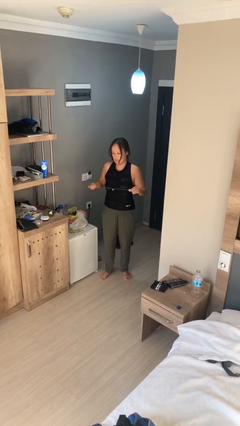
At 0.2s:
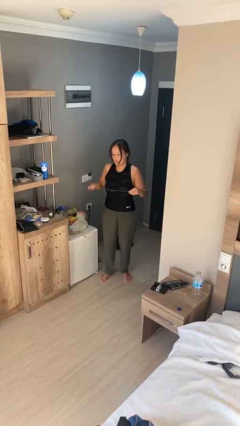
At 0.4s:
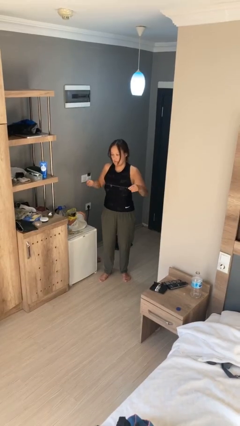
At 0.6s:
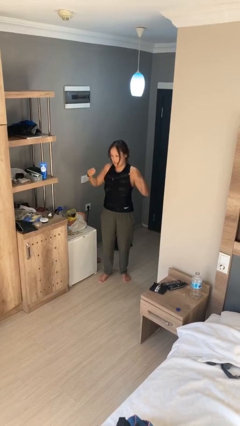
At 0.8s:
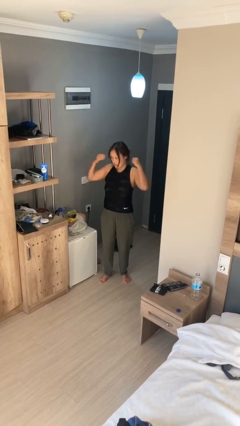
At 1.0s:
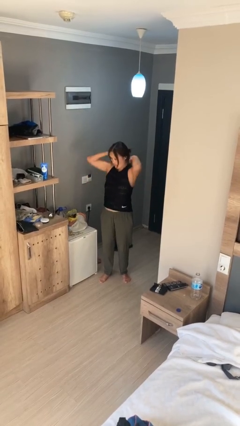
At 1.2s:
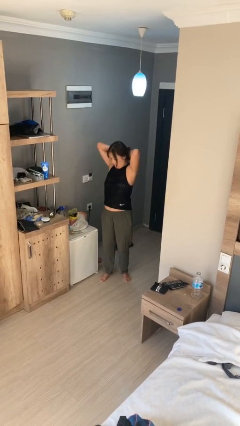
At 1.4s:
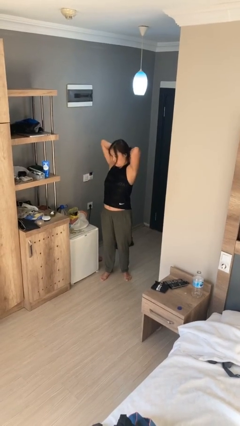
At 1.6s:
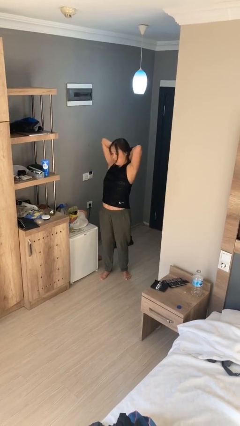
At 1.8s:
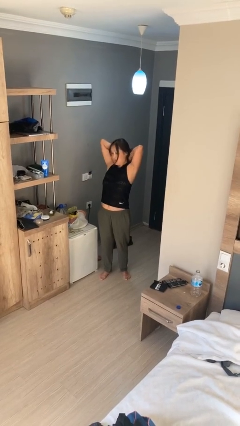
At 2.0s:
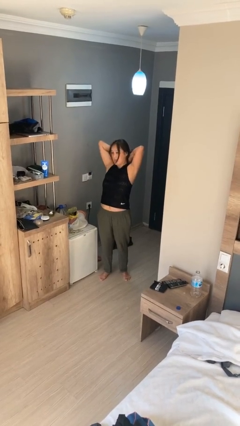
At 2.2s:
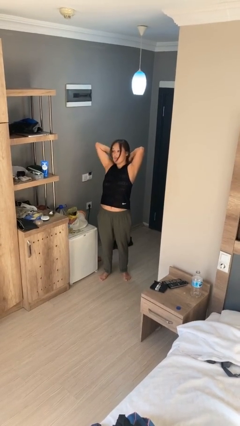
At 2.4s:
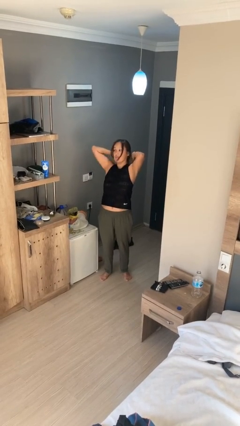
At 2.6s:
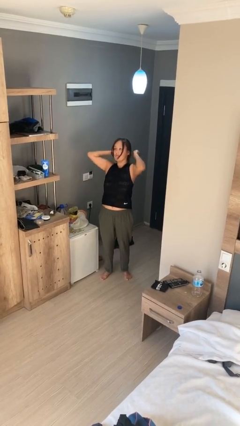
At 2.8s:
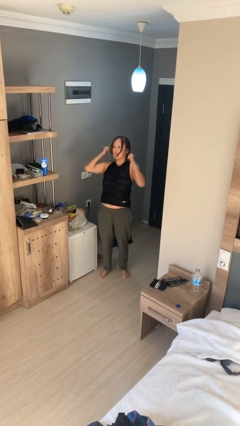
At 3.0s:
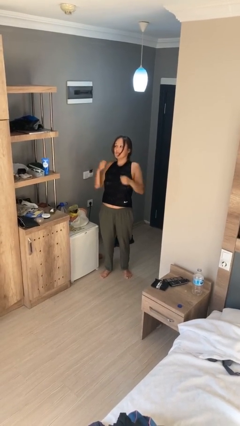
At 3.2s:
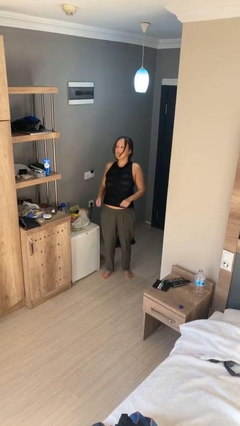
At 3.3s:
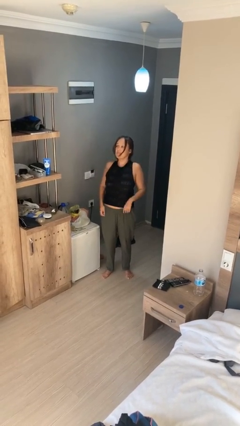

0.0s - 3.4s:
person puts on necklace

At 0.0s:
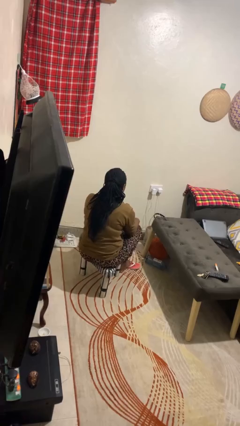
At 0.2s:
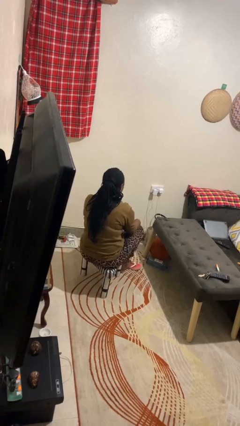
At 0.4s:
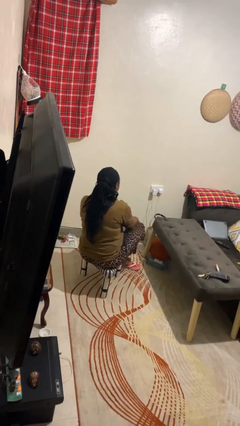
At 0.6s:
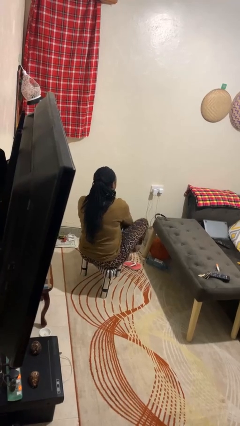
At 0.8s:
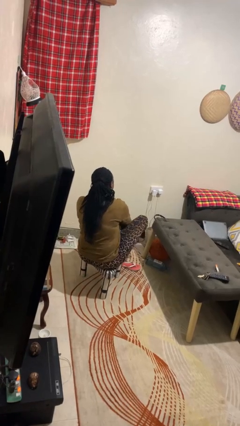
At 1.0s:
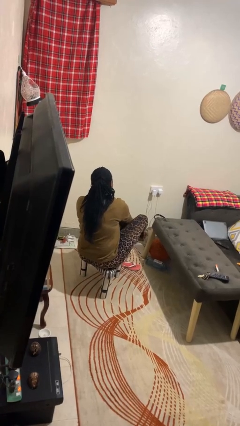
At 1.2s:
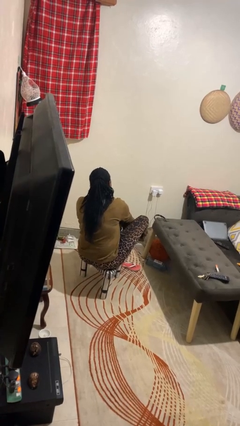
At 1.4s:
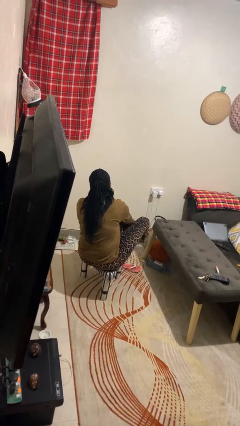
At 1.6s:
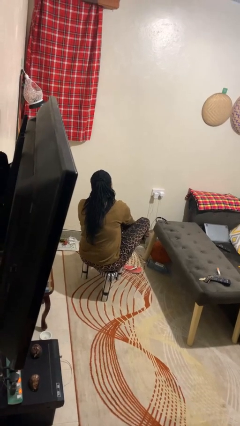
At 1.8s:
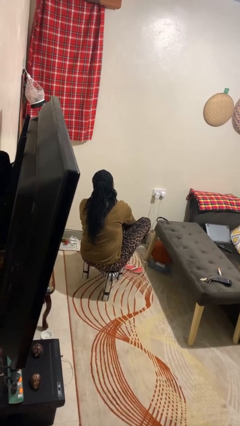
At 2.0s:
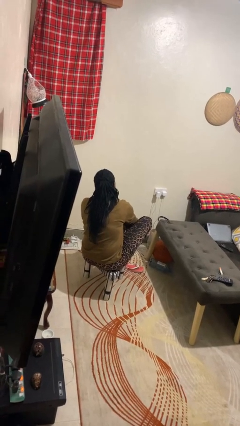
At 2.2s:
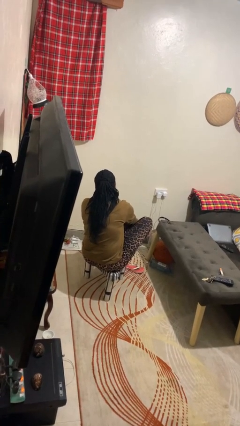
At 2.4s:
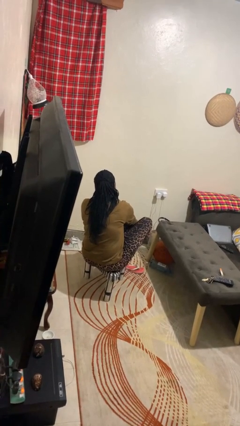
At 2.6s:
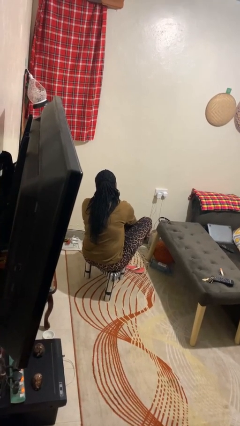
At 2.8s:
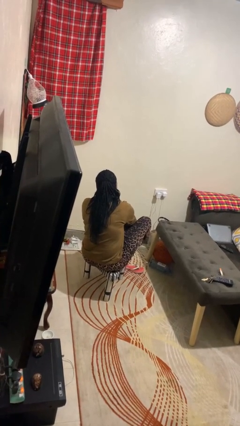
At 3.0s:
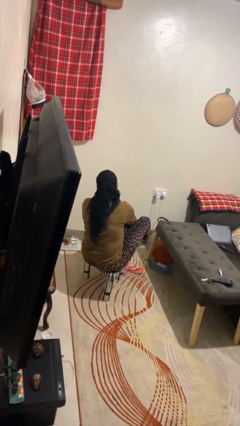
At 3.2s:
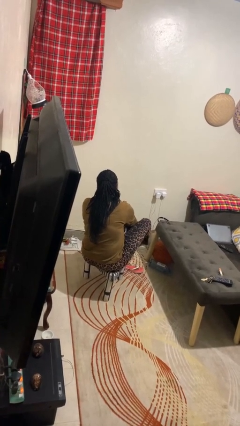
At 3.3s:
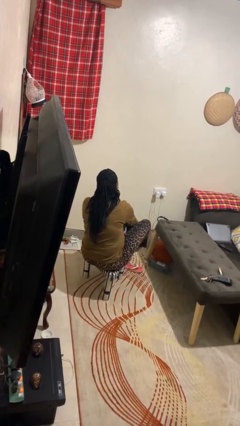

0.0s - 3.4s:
person rubs foot

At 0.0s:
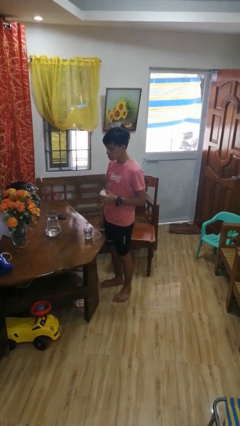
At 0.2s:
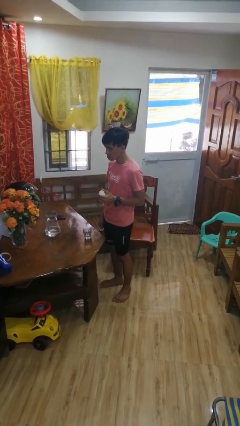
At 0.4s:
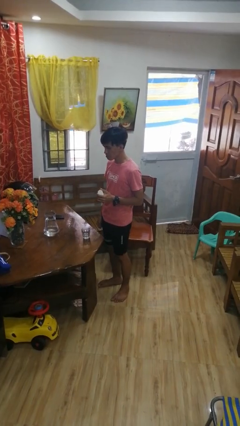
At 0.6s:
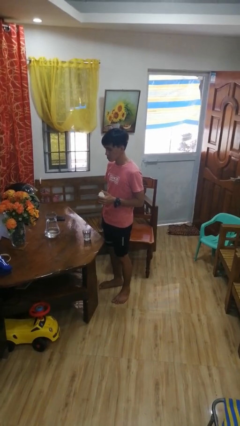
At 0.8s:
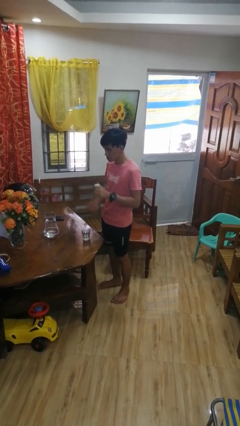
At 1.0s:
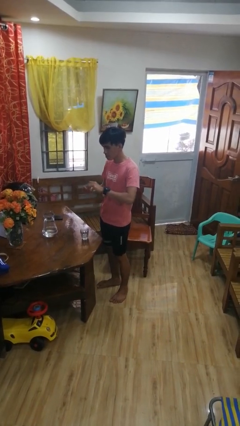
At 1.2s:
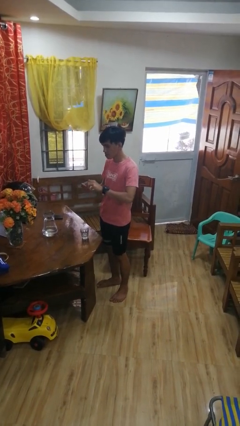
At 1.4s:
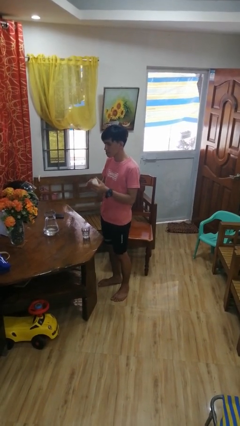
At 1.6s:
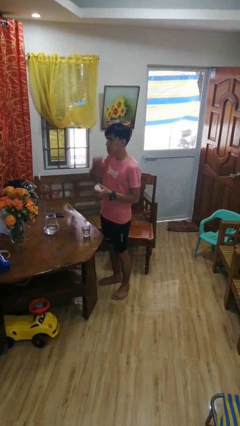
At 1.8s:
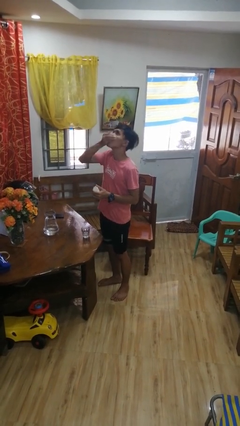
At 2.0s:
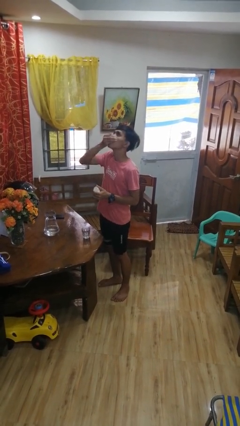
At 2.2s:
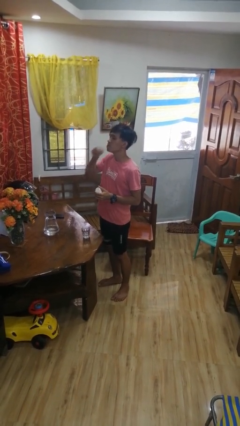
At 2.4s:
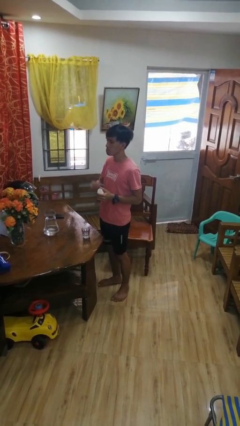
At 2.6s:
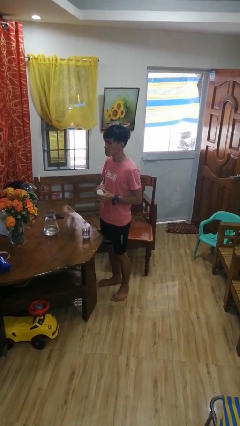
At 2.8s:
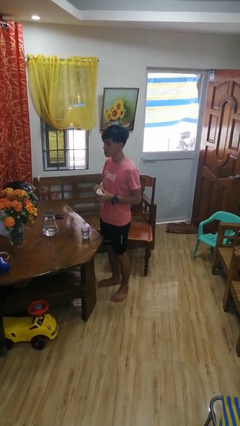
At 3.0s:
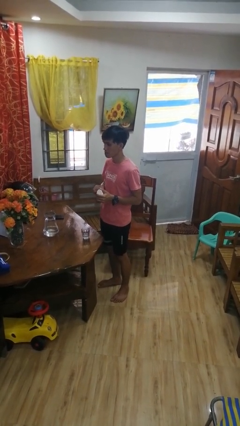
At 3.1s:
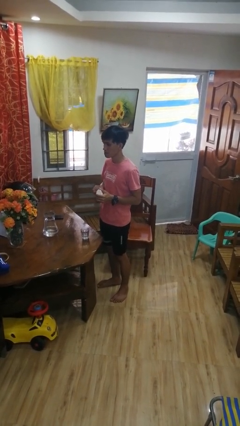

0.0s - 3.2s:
person takes medicine pills

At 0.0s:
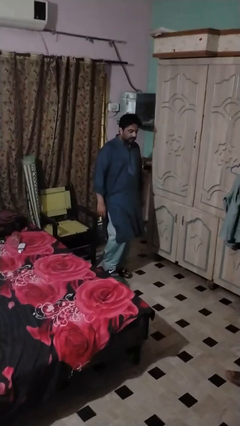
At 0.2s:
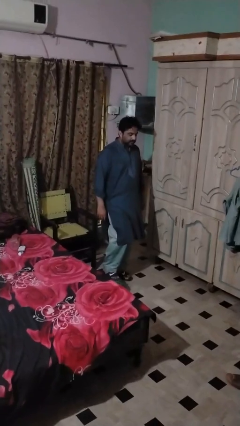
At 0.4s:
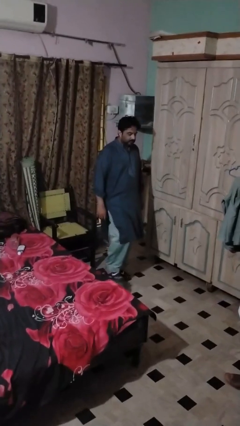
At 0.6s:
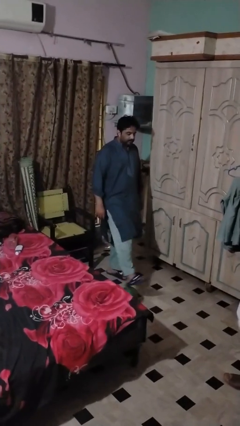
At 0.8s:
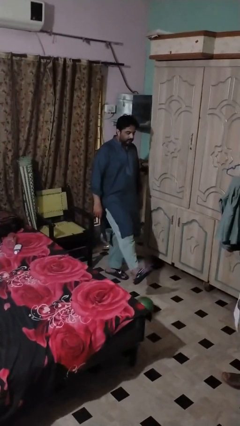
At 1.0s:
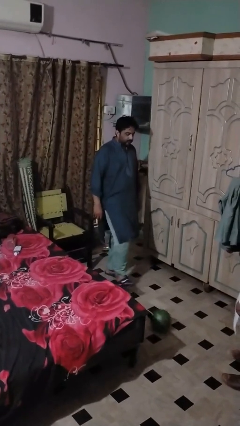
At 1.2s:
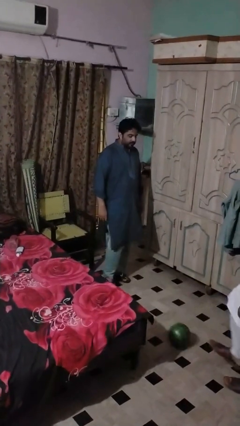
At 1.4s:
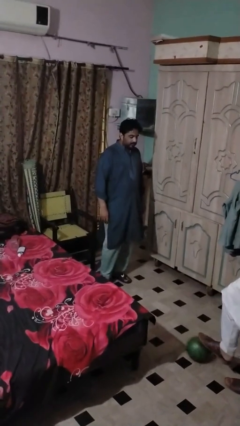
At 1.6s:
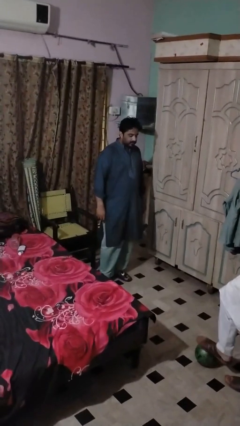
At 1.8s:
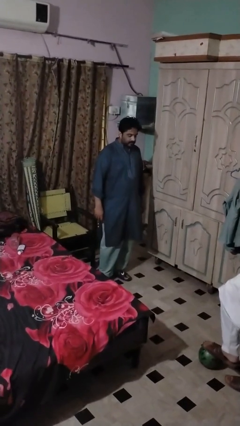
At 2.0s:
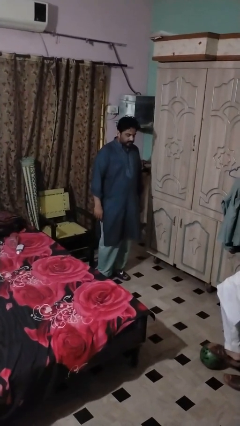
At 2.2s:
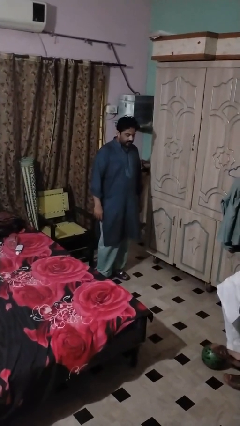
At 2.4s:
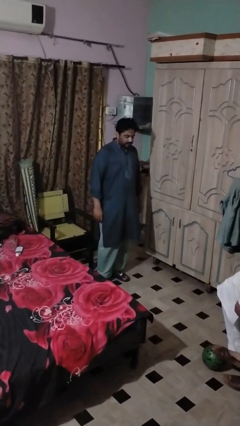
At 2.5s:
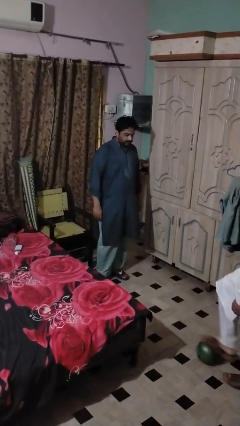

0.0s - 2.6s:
person kicks object to person

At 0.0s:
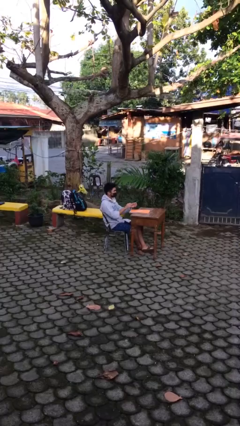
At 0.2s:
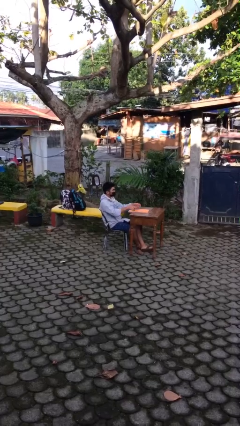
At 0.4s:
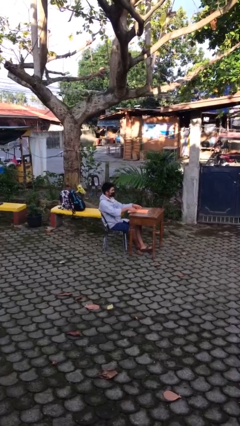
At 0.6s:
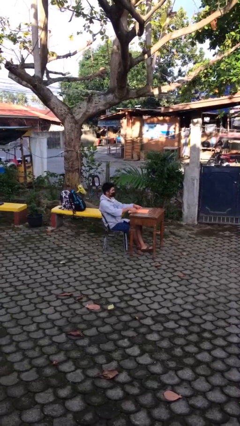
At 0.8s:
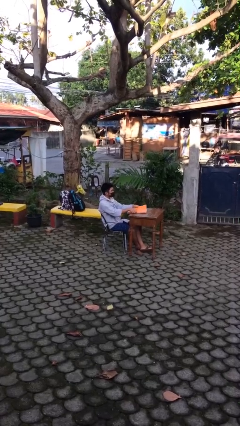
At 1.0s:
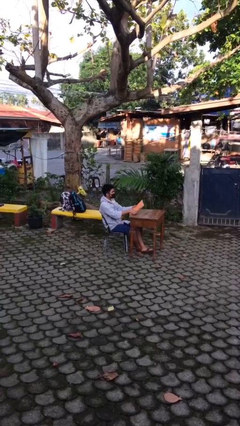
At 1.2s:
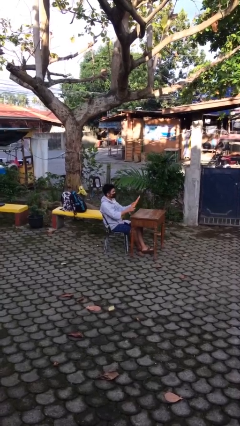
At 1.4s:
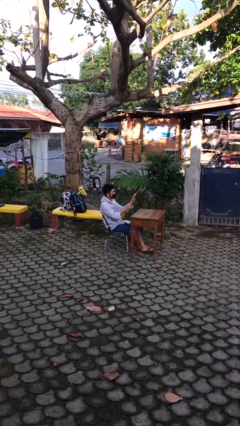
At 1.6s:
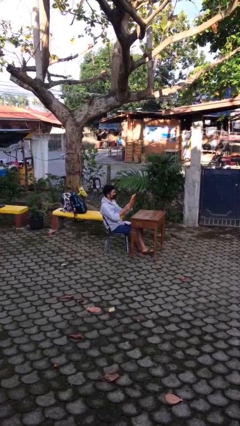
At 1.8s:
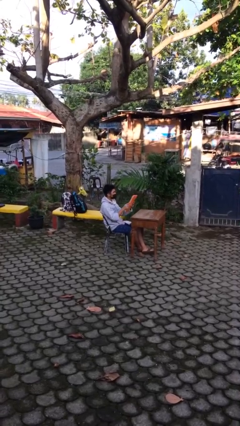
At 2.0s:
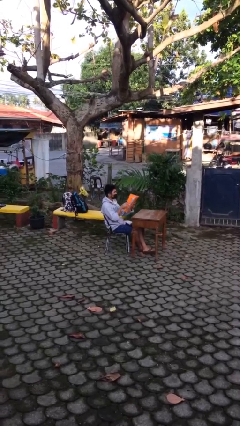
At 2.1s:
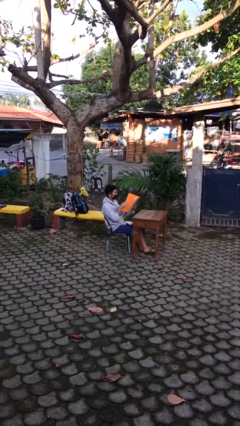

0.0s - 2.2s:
person picks up object from table

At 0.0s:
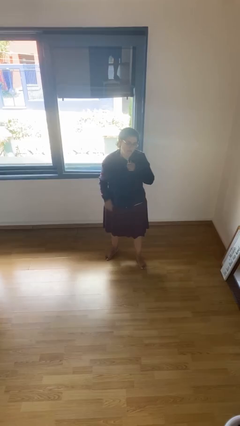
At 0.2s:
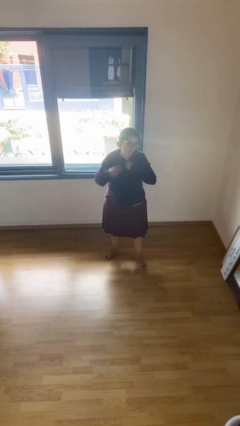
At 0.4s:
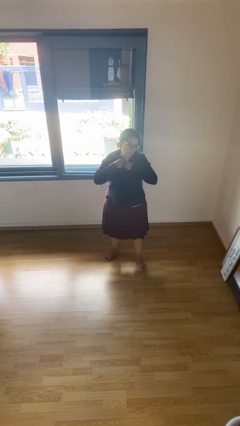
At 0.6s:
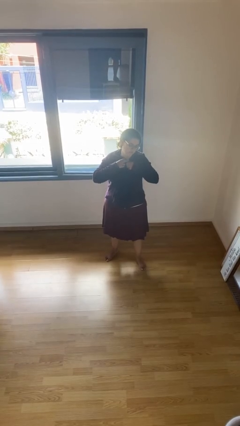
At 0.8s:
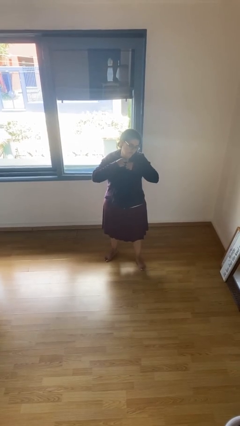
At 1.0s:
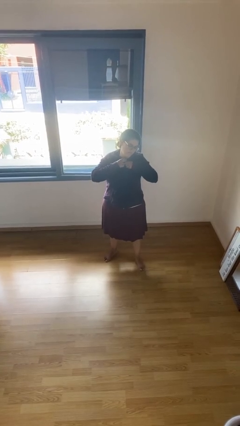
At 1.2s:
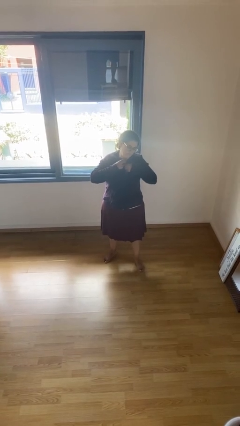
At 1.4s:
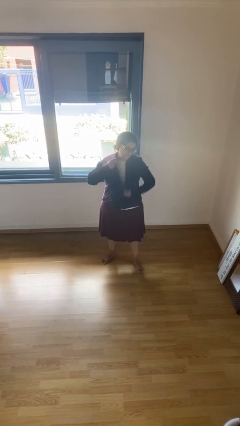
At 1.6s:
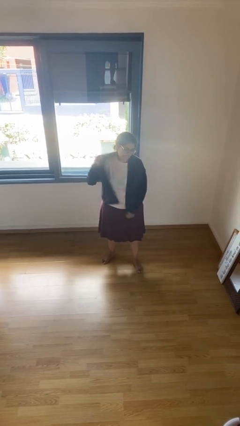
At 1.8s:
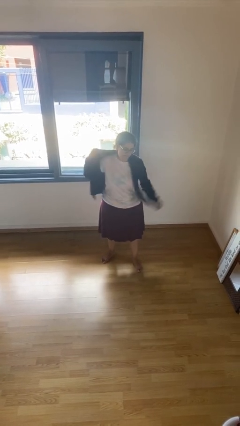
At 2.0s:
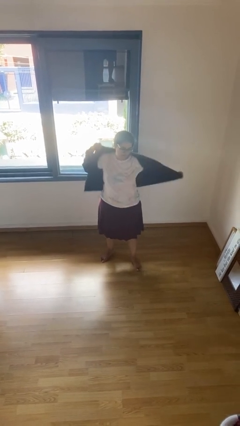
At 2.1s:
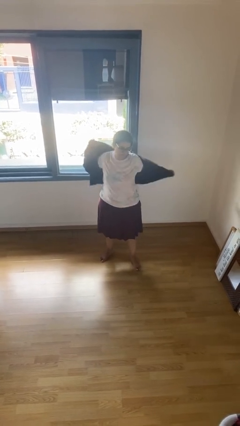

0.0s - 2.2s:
person unzips jacket

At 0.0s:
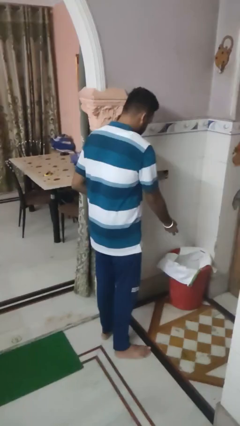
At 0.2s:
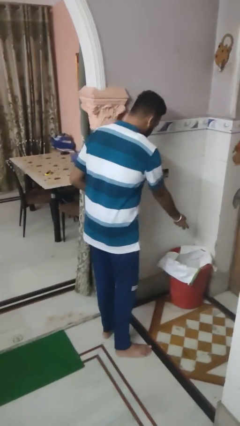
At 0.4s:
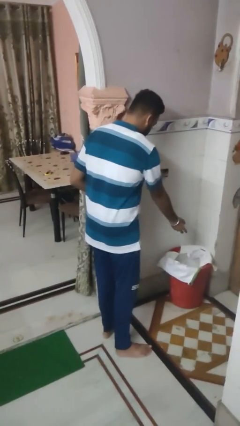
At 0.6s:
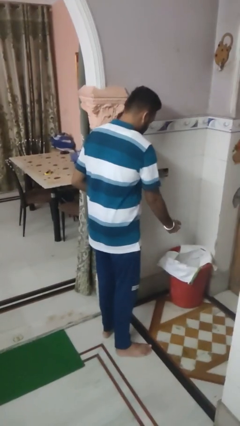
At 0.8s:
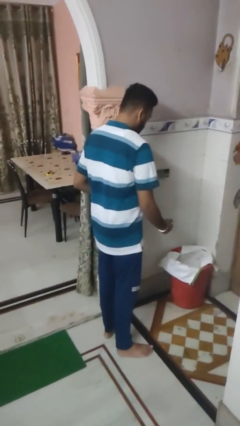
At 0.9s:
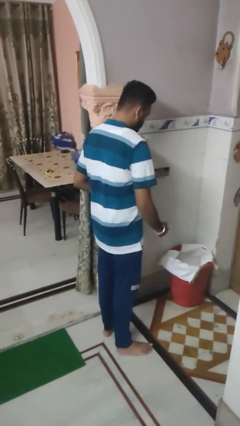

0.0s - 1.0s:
person discards trash
